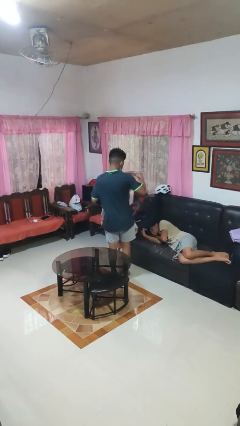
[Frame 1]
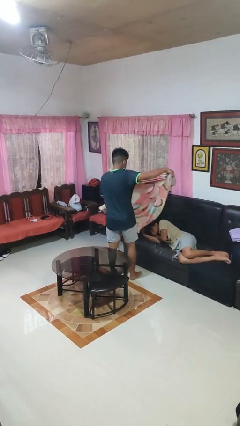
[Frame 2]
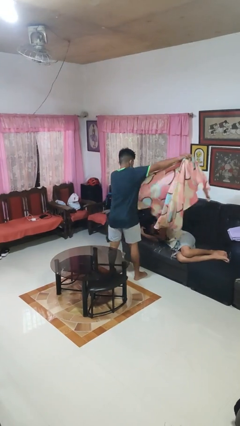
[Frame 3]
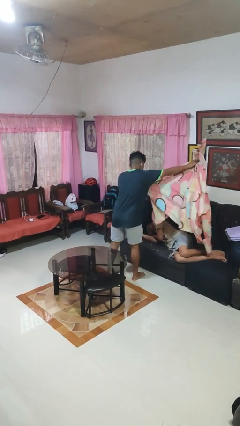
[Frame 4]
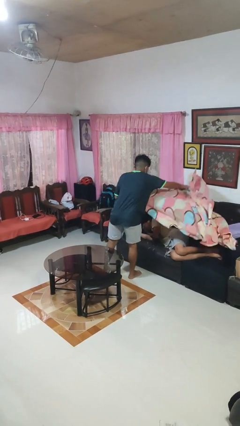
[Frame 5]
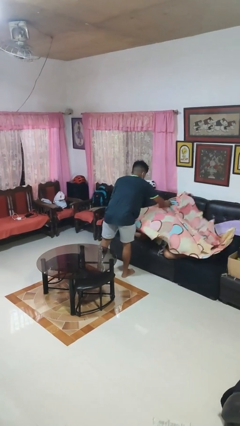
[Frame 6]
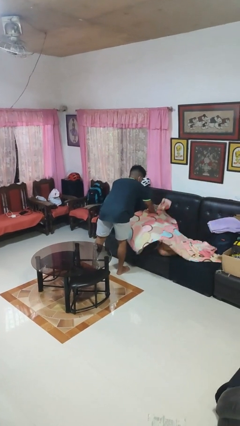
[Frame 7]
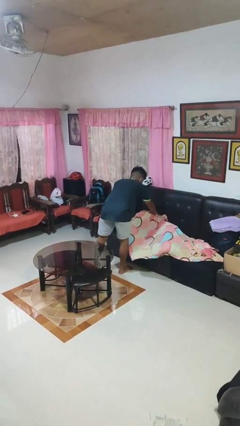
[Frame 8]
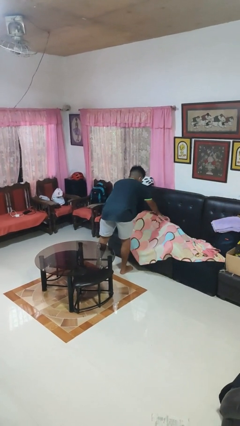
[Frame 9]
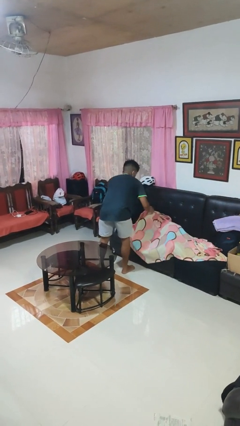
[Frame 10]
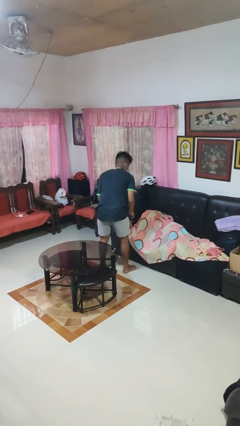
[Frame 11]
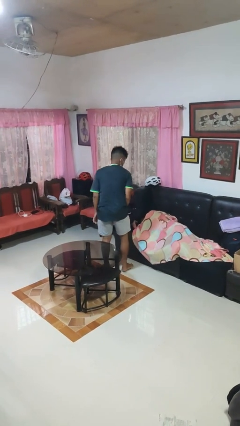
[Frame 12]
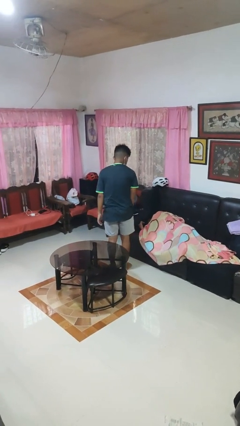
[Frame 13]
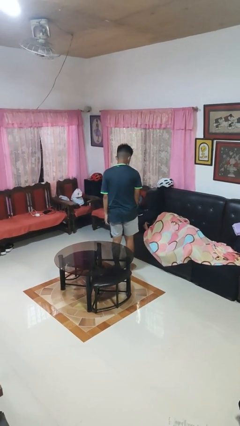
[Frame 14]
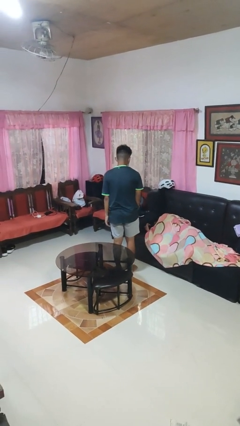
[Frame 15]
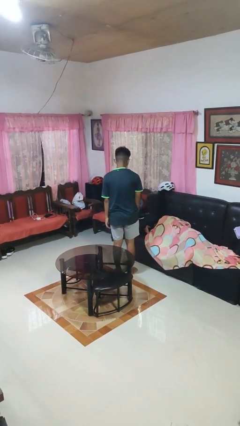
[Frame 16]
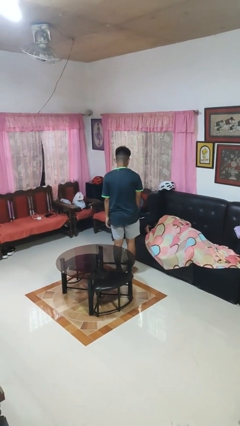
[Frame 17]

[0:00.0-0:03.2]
person covers friend with blanket

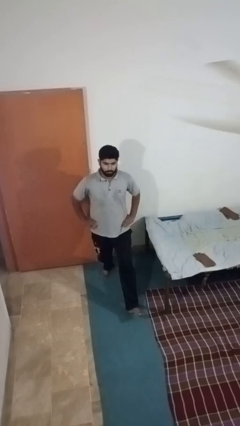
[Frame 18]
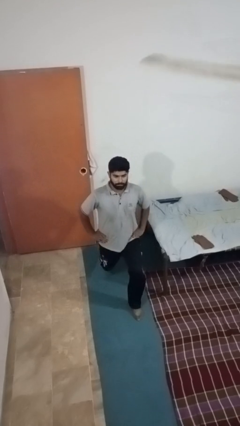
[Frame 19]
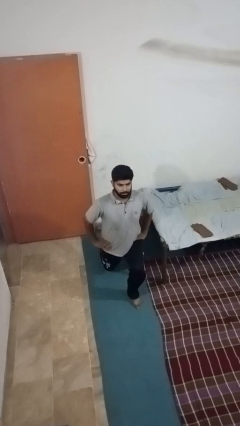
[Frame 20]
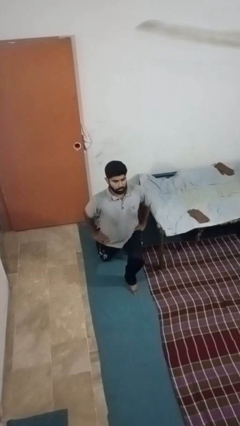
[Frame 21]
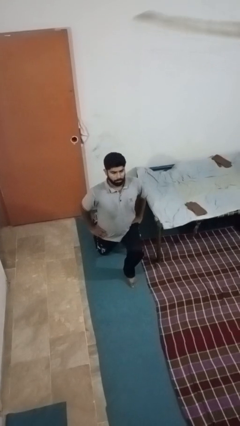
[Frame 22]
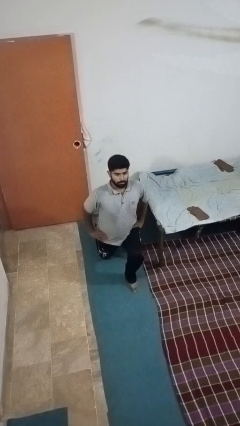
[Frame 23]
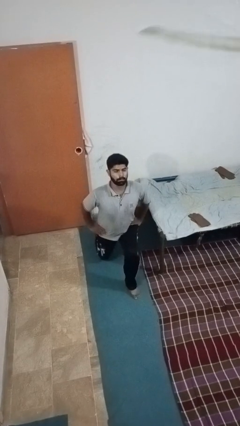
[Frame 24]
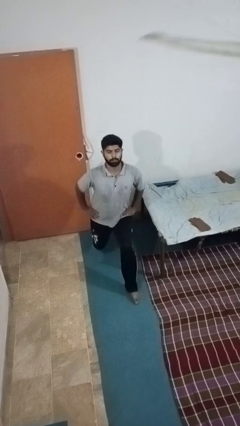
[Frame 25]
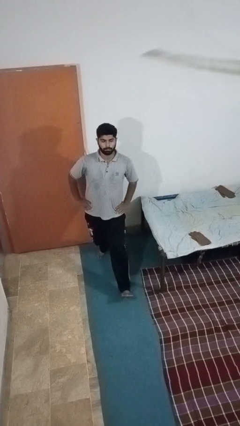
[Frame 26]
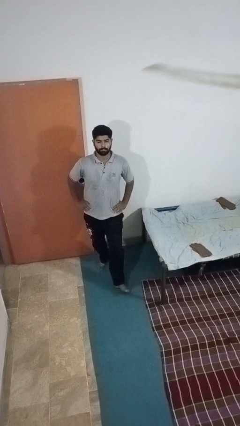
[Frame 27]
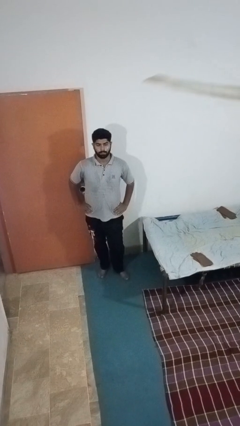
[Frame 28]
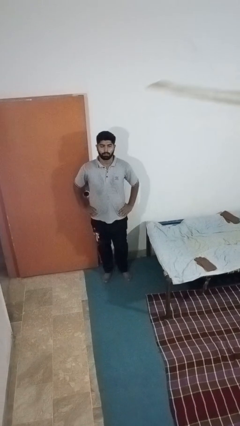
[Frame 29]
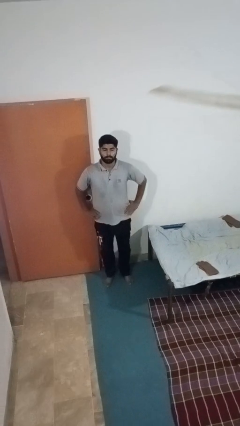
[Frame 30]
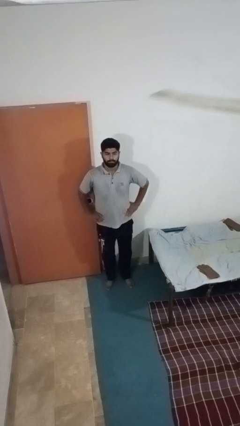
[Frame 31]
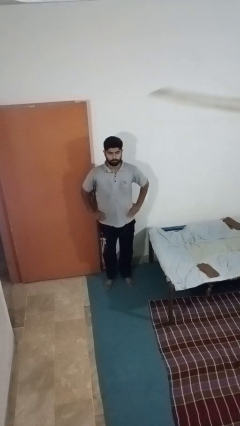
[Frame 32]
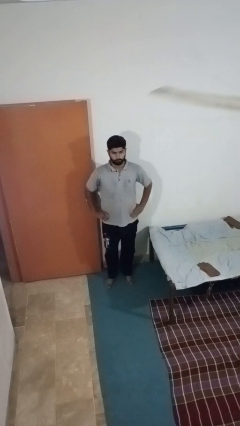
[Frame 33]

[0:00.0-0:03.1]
person exercises with lunges

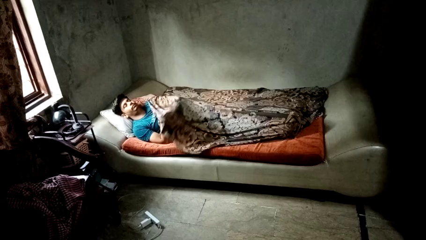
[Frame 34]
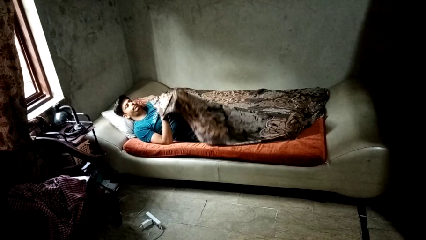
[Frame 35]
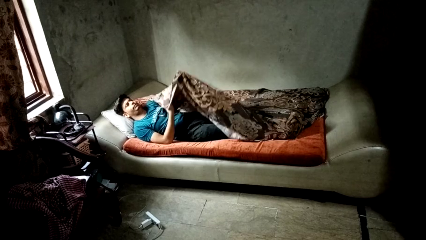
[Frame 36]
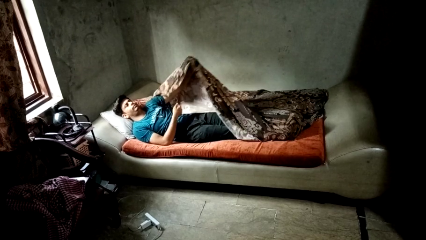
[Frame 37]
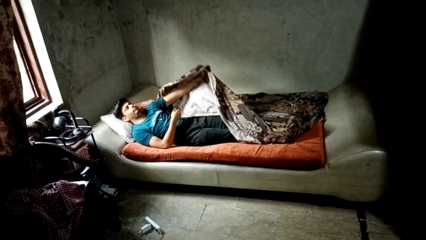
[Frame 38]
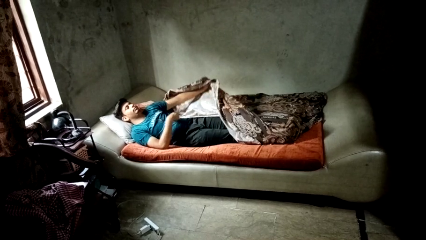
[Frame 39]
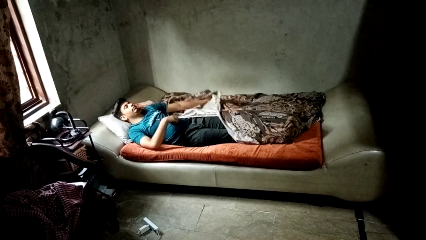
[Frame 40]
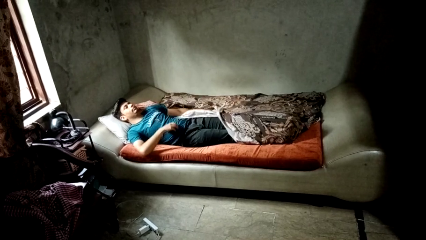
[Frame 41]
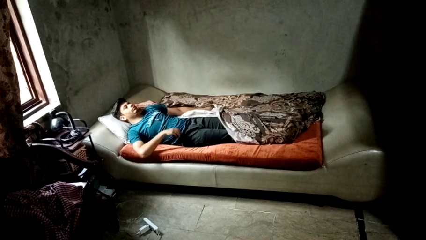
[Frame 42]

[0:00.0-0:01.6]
person uncovers with bedsheets

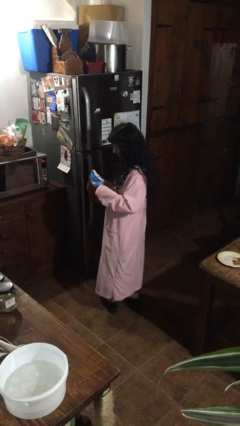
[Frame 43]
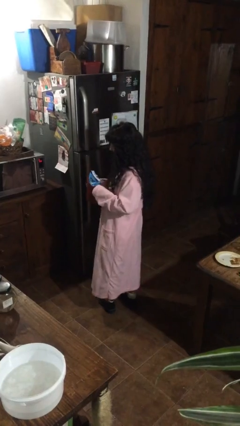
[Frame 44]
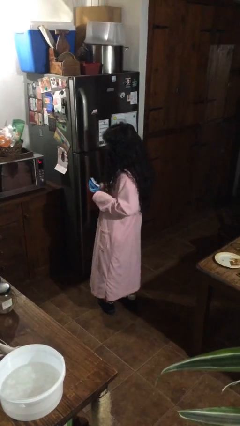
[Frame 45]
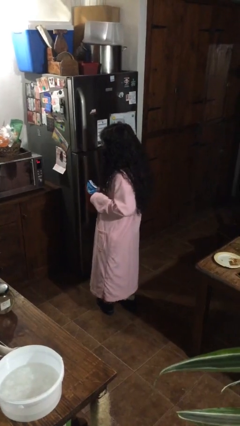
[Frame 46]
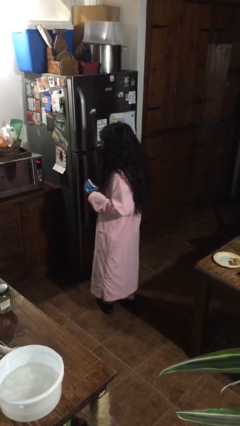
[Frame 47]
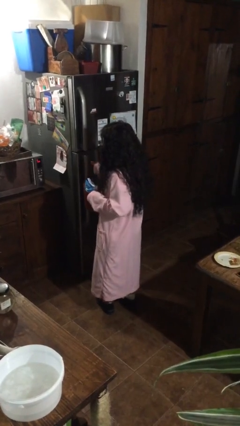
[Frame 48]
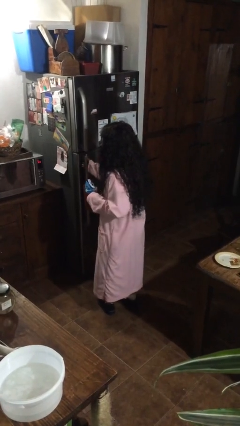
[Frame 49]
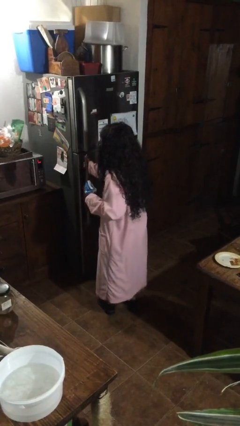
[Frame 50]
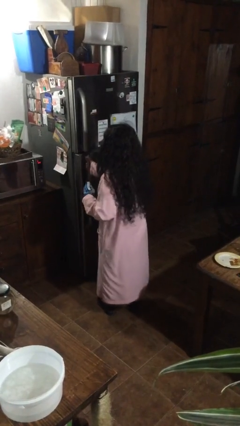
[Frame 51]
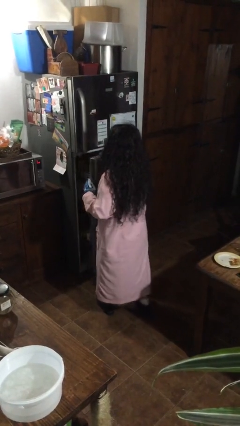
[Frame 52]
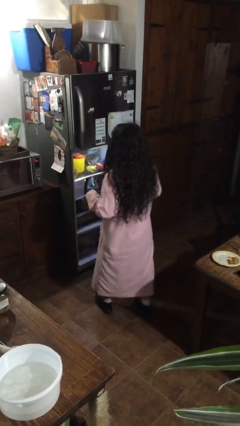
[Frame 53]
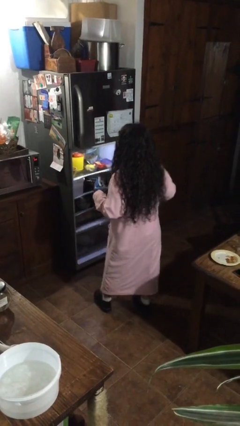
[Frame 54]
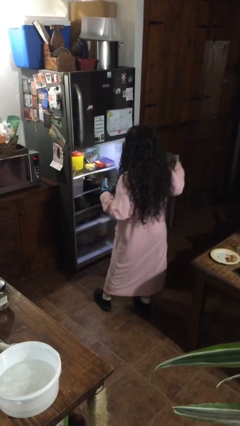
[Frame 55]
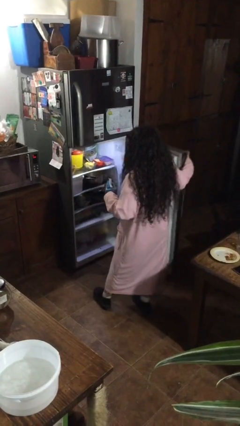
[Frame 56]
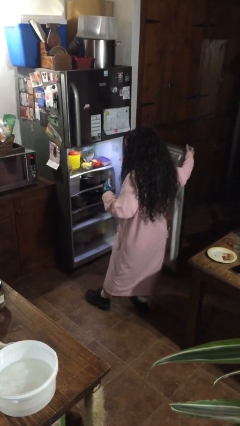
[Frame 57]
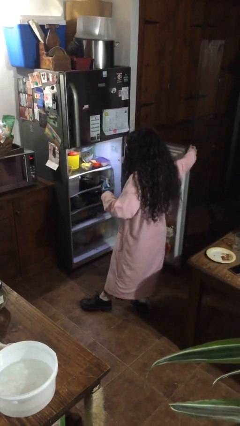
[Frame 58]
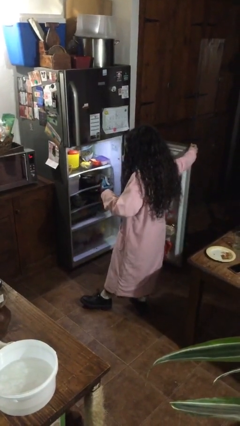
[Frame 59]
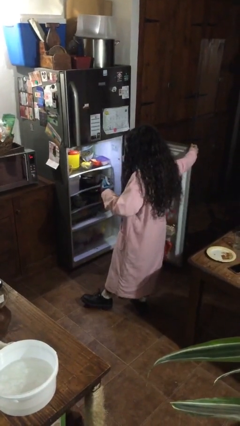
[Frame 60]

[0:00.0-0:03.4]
person opens refrigerator

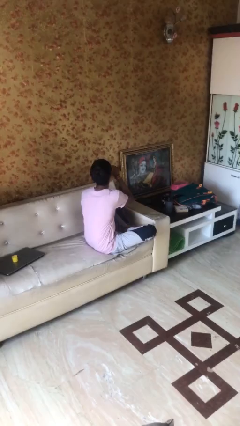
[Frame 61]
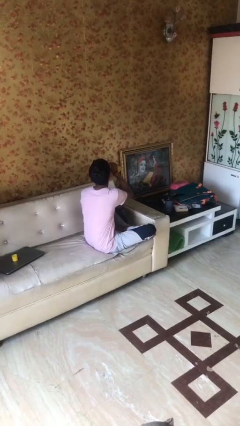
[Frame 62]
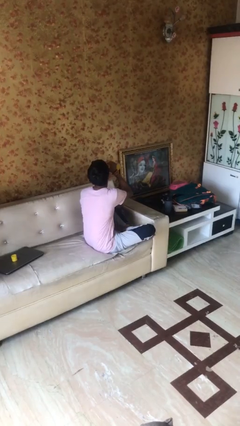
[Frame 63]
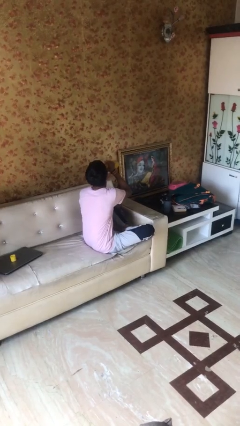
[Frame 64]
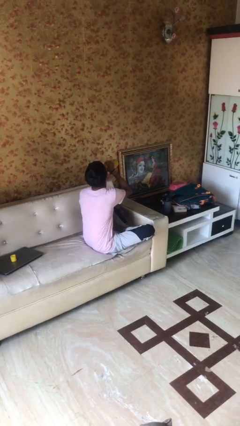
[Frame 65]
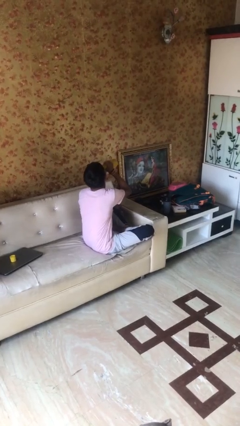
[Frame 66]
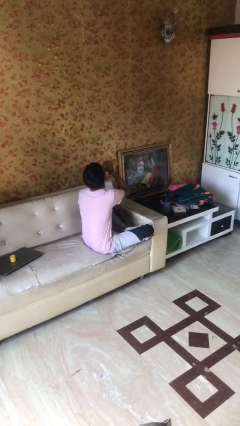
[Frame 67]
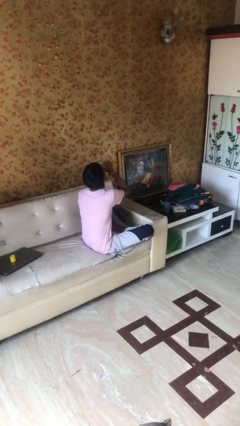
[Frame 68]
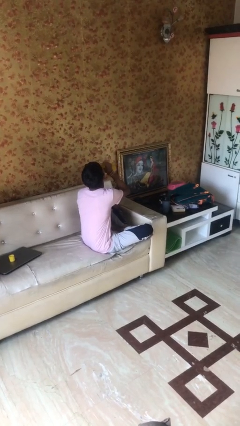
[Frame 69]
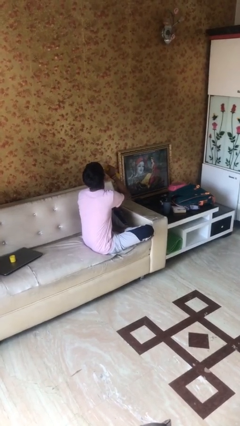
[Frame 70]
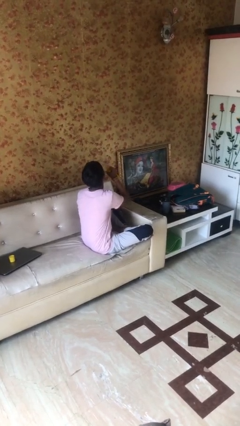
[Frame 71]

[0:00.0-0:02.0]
person drinks from bottle

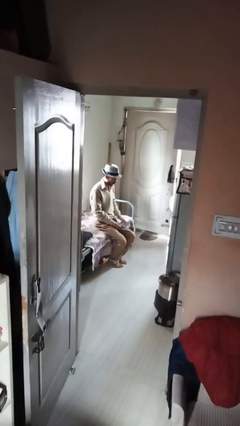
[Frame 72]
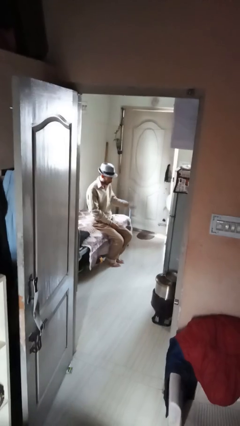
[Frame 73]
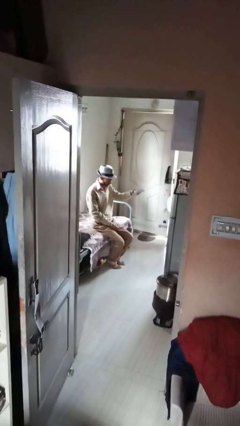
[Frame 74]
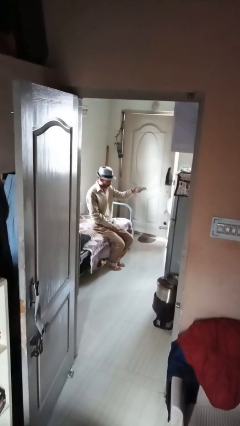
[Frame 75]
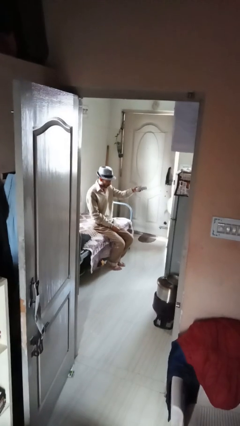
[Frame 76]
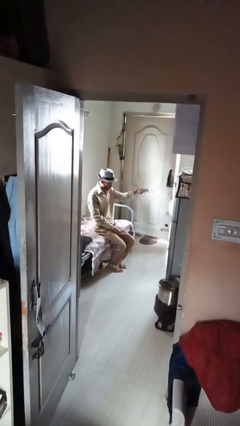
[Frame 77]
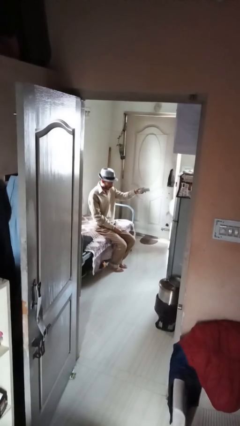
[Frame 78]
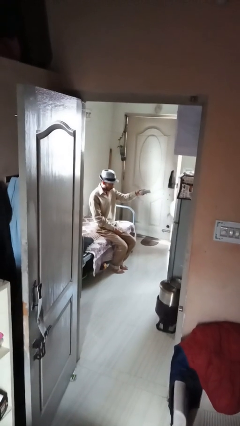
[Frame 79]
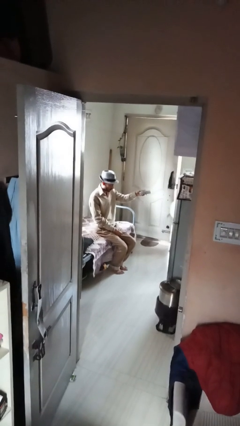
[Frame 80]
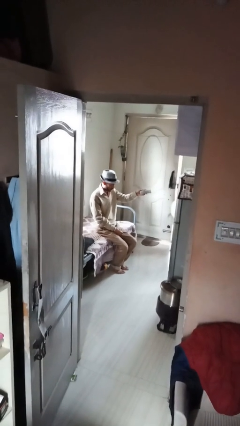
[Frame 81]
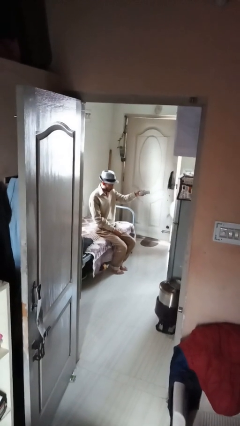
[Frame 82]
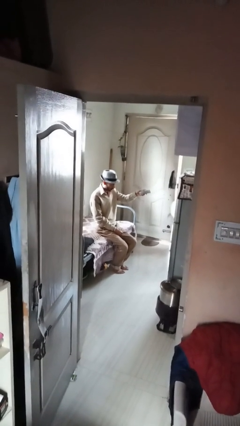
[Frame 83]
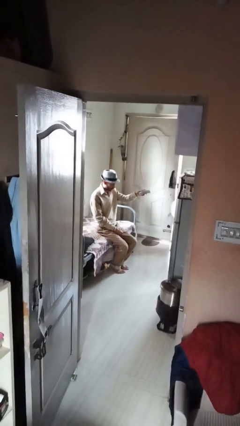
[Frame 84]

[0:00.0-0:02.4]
person uses television remote

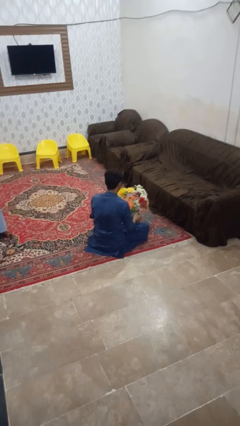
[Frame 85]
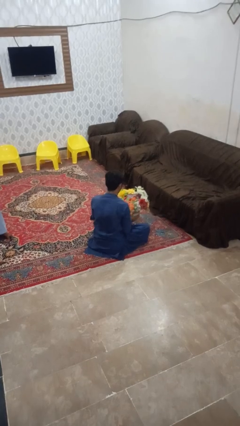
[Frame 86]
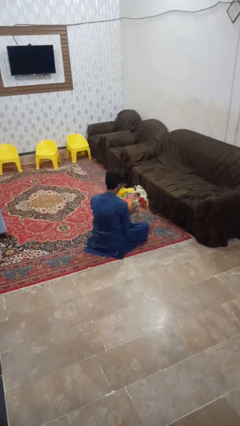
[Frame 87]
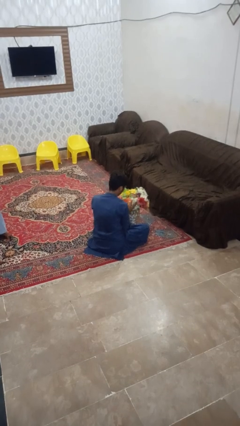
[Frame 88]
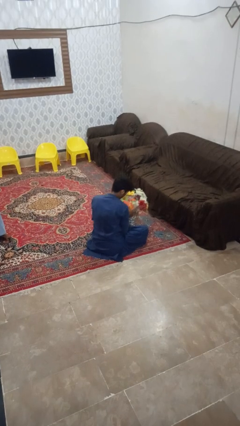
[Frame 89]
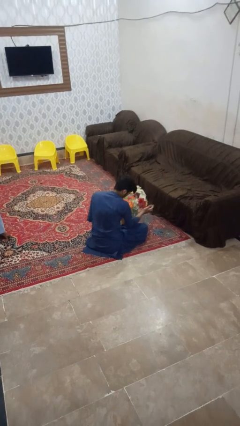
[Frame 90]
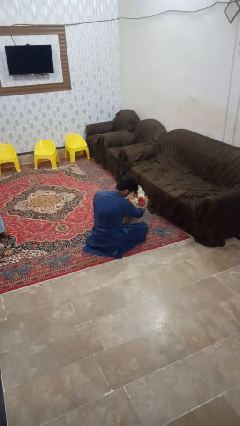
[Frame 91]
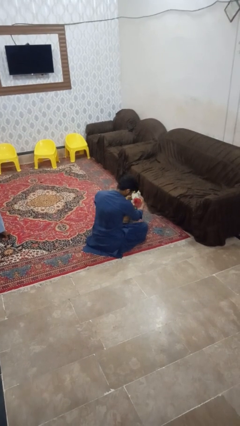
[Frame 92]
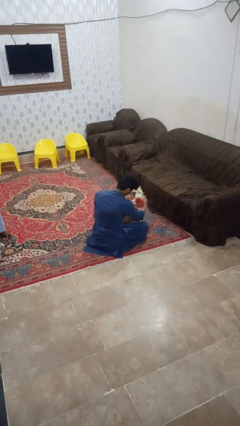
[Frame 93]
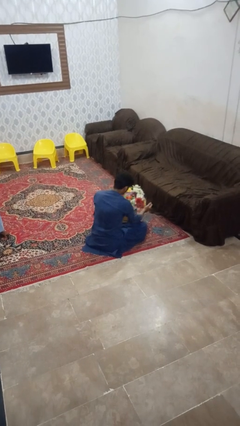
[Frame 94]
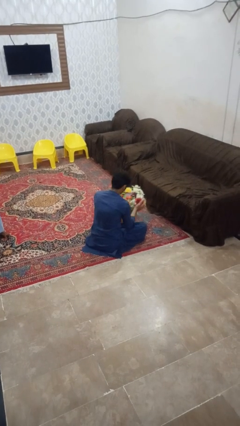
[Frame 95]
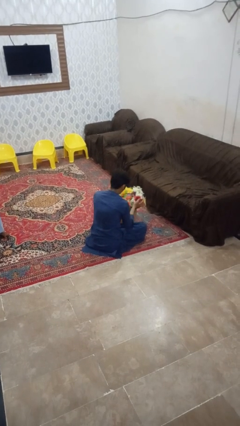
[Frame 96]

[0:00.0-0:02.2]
person arranges flowers in vase
